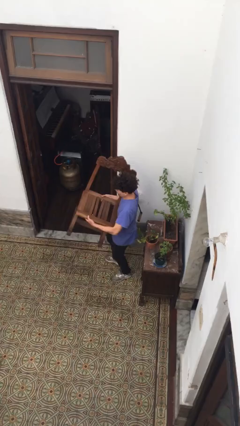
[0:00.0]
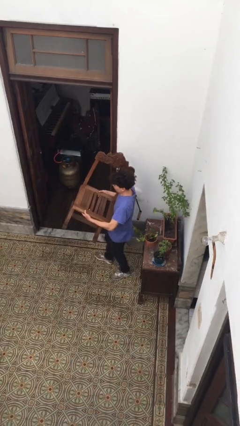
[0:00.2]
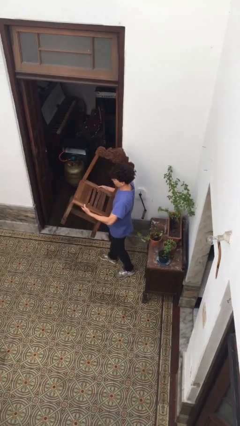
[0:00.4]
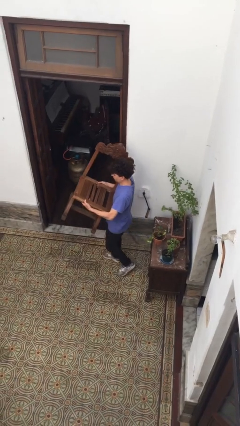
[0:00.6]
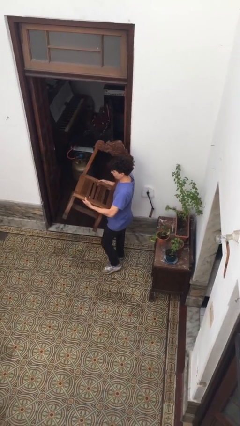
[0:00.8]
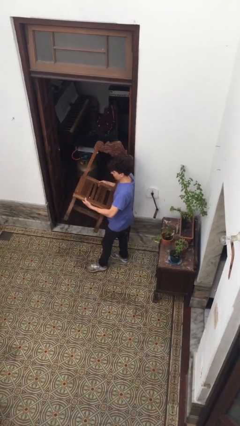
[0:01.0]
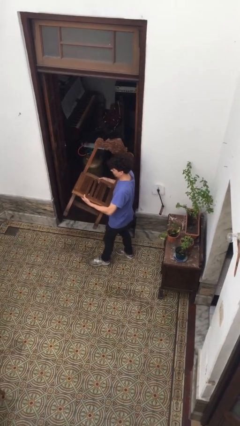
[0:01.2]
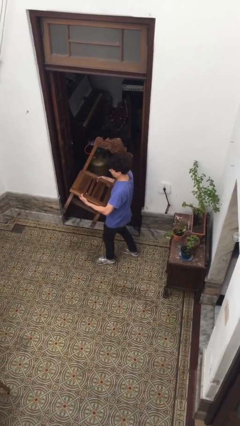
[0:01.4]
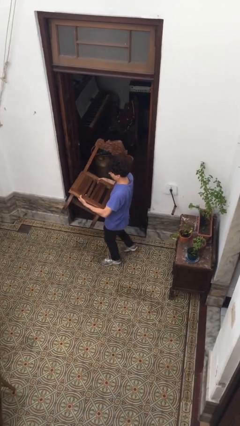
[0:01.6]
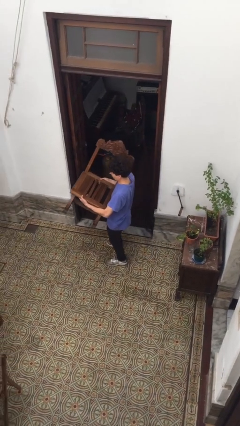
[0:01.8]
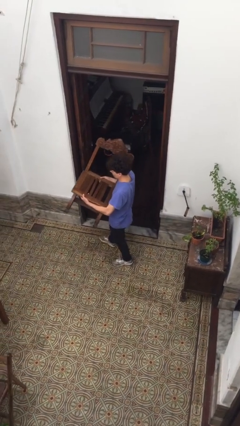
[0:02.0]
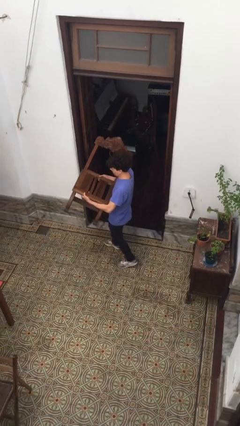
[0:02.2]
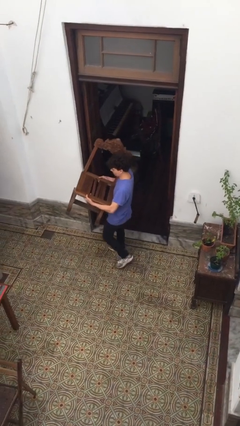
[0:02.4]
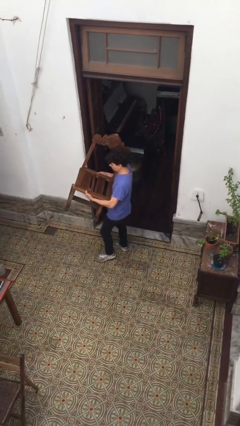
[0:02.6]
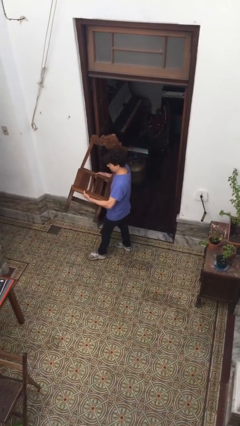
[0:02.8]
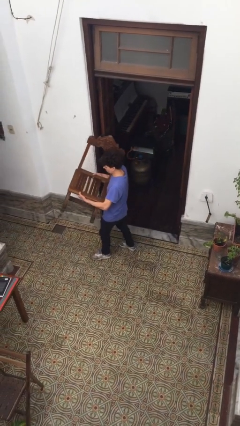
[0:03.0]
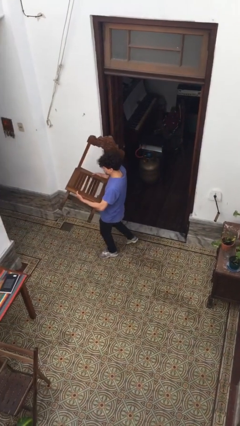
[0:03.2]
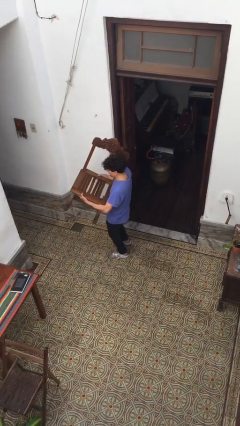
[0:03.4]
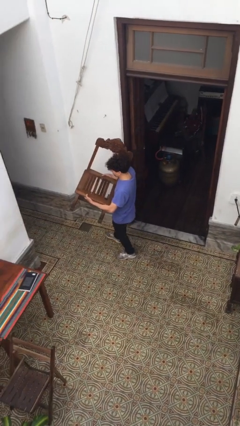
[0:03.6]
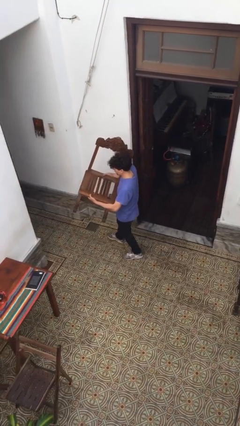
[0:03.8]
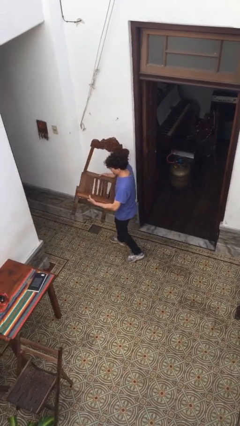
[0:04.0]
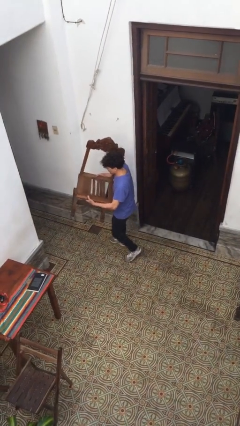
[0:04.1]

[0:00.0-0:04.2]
person carries heavy object

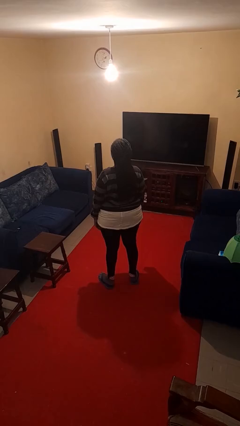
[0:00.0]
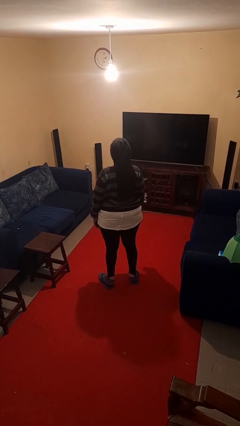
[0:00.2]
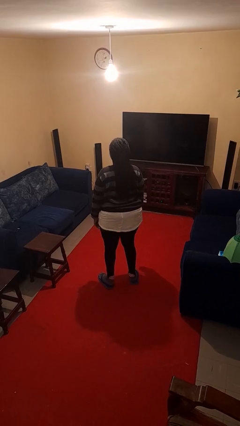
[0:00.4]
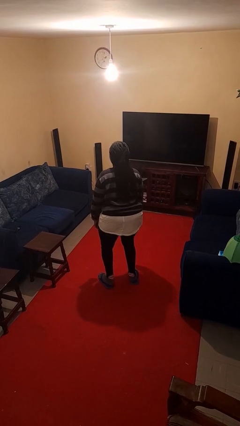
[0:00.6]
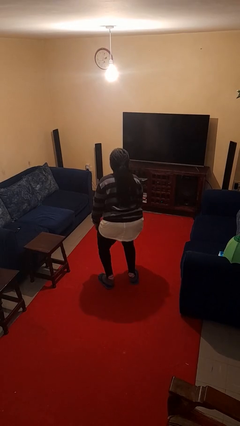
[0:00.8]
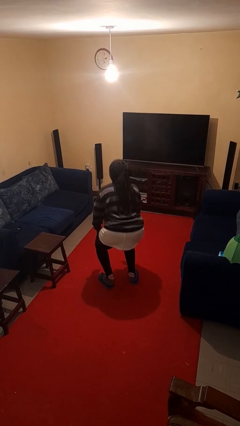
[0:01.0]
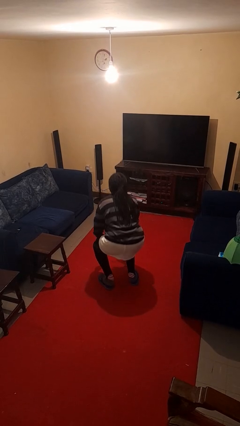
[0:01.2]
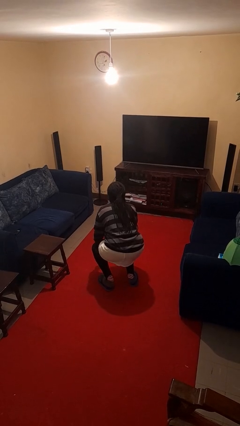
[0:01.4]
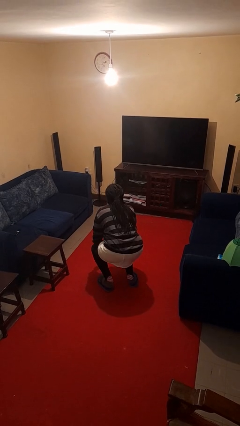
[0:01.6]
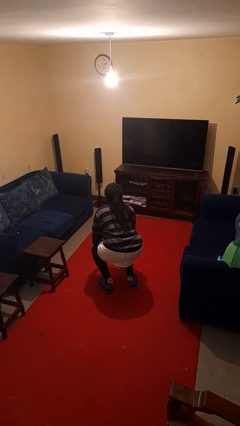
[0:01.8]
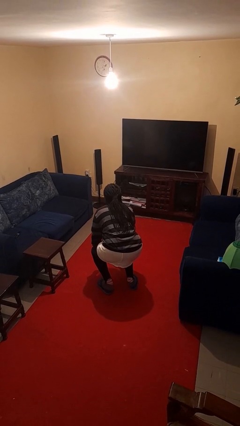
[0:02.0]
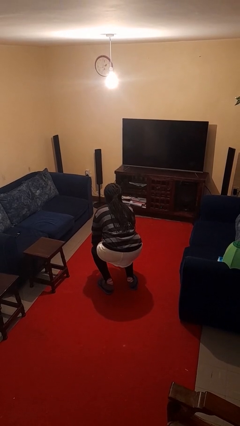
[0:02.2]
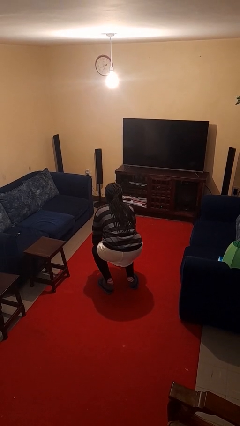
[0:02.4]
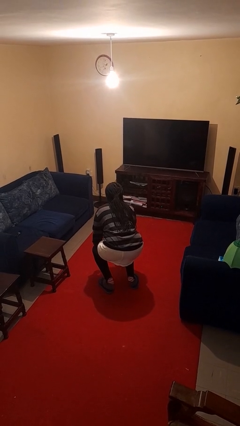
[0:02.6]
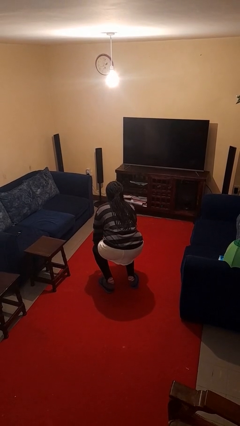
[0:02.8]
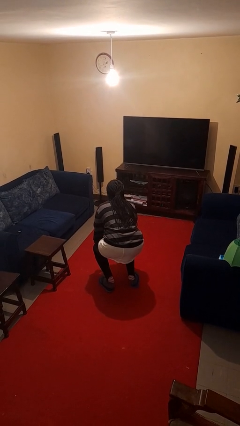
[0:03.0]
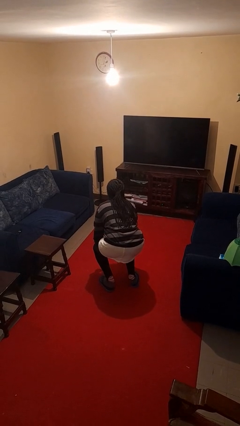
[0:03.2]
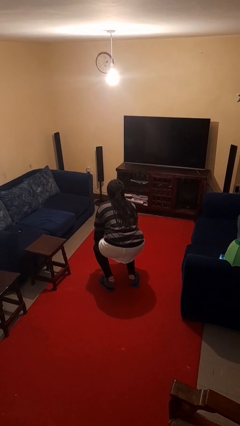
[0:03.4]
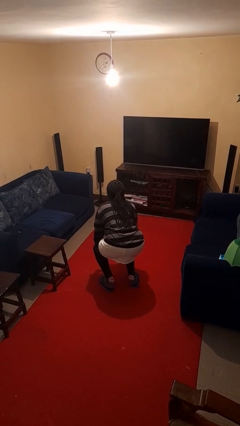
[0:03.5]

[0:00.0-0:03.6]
person squats

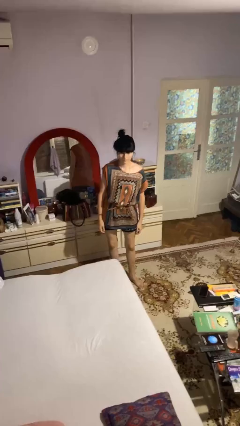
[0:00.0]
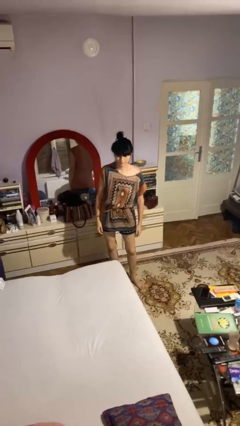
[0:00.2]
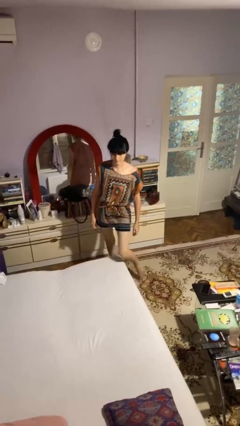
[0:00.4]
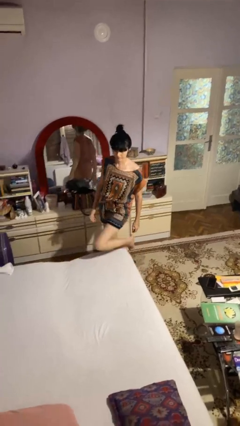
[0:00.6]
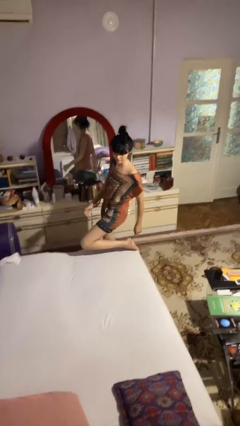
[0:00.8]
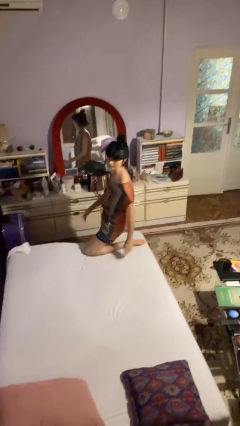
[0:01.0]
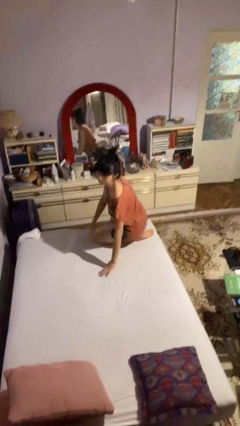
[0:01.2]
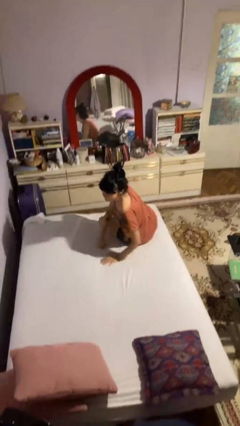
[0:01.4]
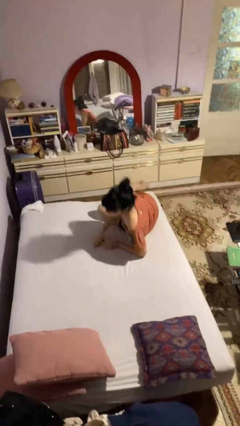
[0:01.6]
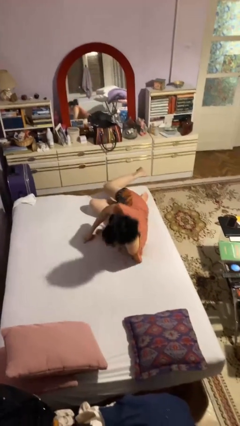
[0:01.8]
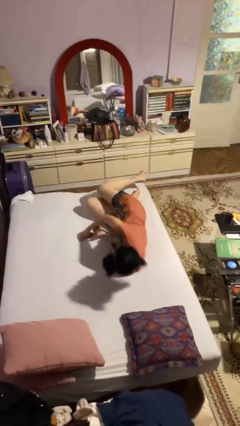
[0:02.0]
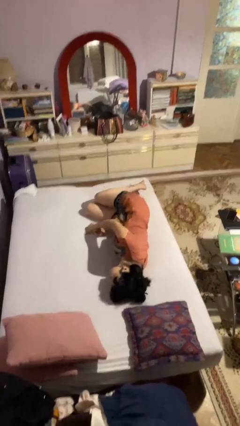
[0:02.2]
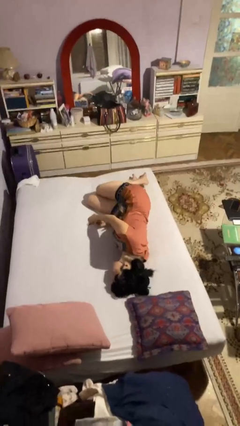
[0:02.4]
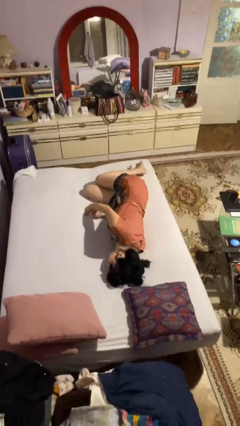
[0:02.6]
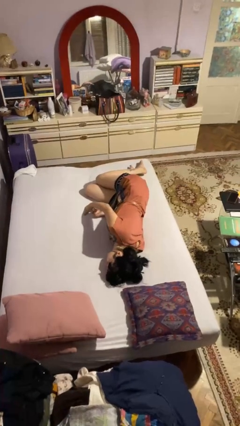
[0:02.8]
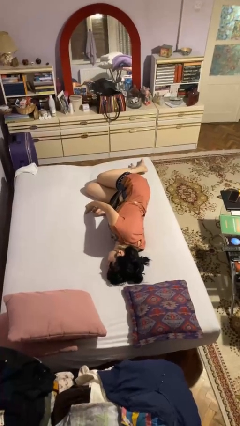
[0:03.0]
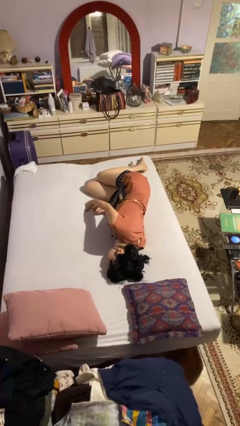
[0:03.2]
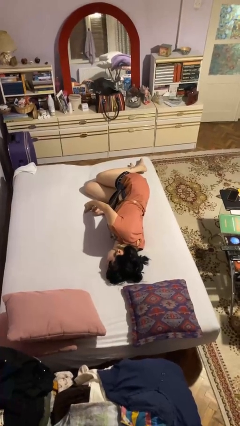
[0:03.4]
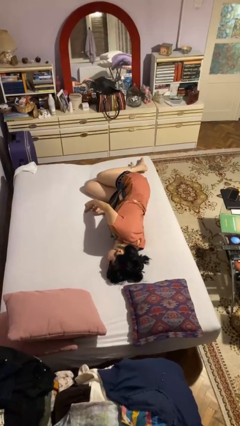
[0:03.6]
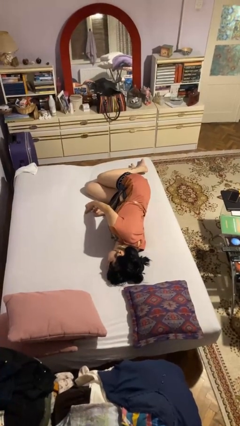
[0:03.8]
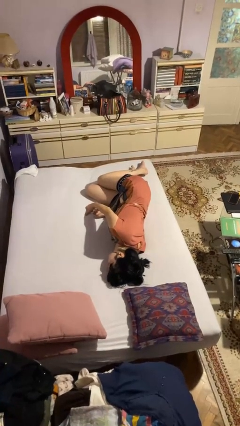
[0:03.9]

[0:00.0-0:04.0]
person lies down on bed

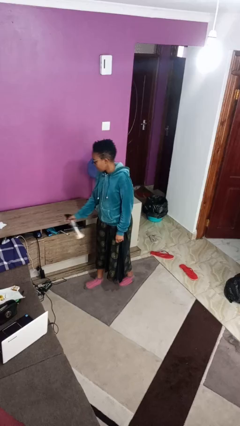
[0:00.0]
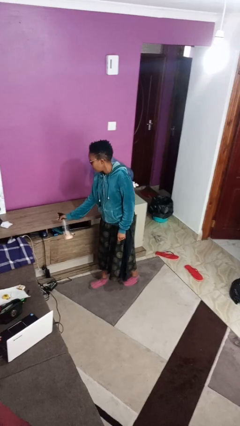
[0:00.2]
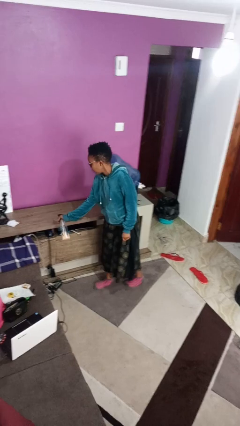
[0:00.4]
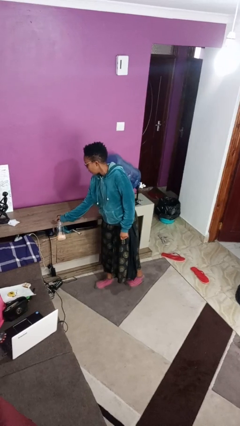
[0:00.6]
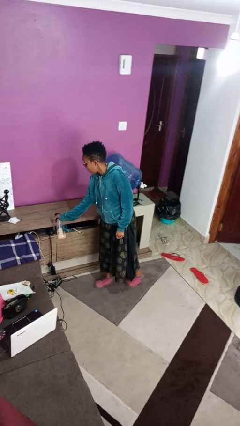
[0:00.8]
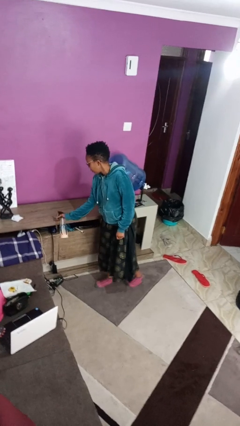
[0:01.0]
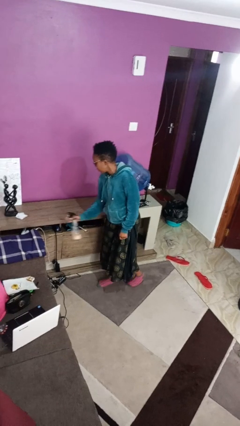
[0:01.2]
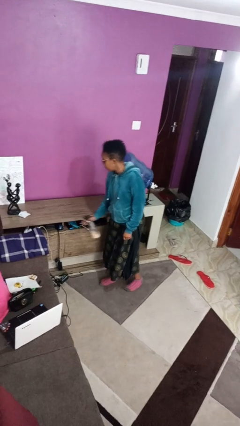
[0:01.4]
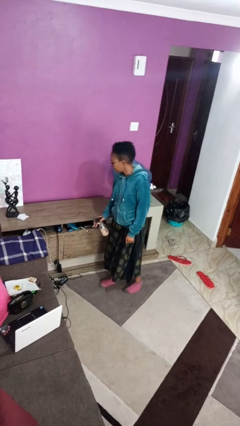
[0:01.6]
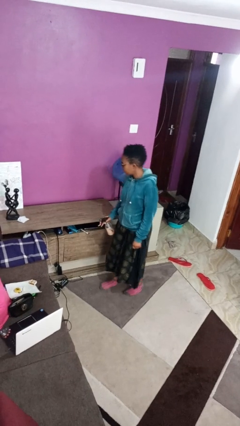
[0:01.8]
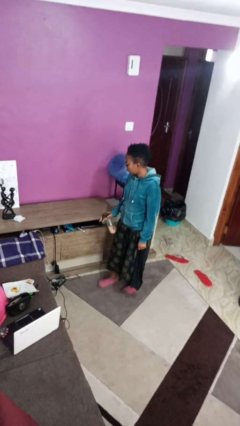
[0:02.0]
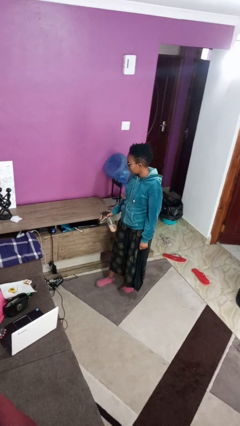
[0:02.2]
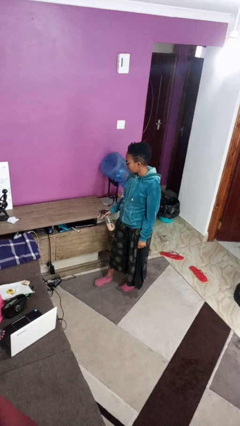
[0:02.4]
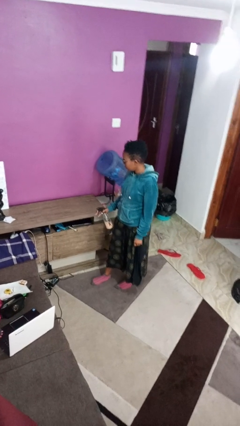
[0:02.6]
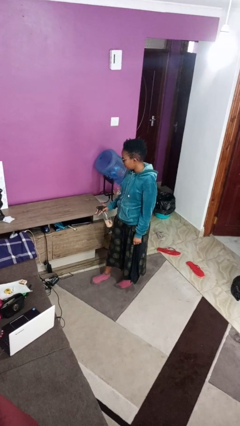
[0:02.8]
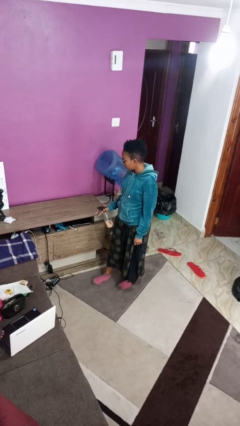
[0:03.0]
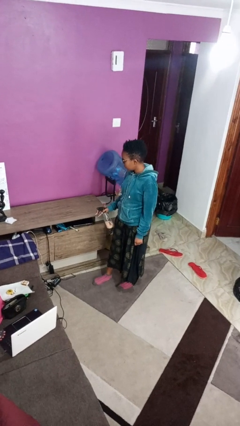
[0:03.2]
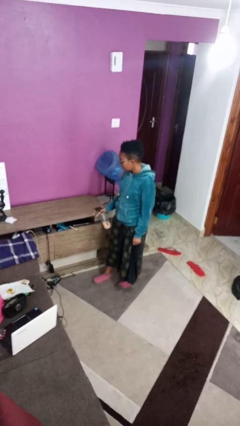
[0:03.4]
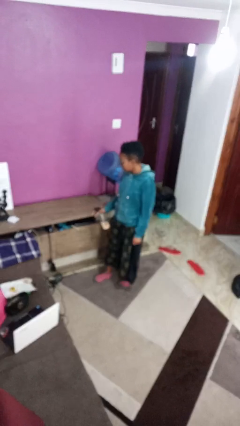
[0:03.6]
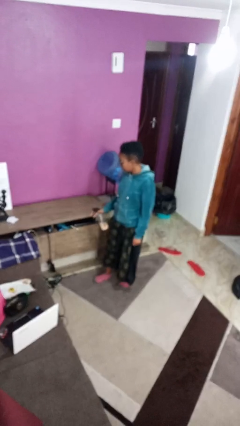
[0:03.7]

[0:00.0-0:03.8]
person sprays from bottle

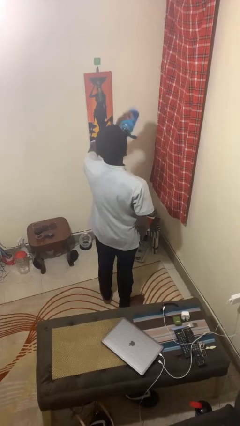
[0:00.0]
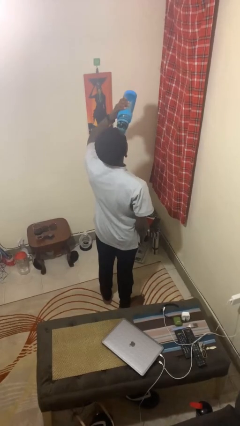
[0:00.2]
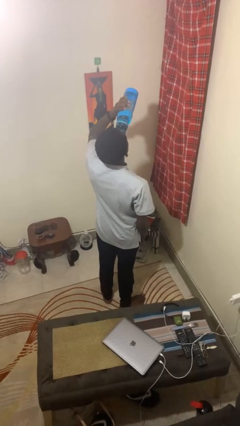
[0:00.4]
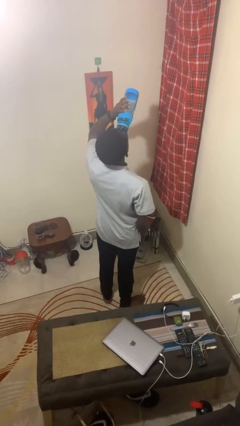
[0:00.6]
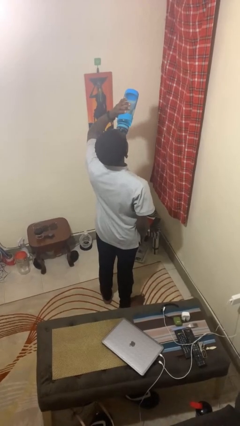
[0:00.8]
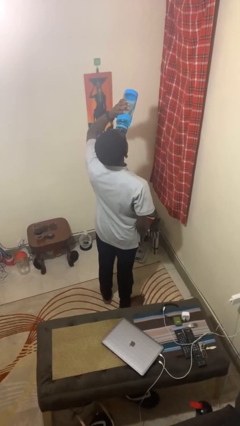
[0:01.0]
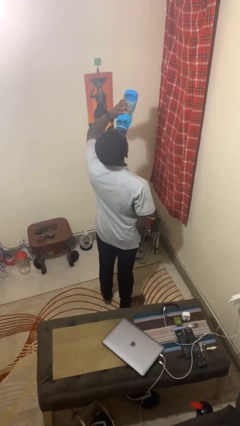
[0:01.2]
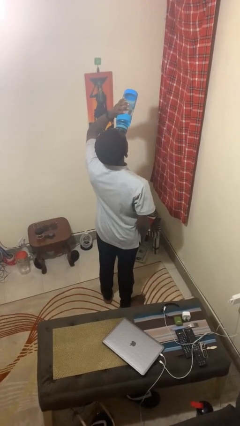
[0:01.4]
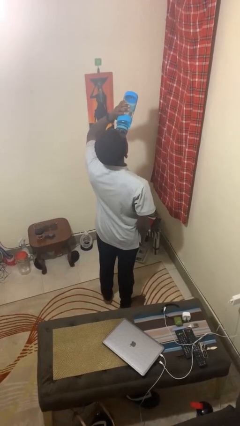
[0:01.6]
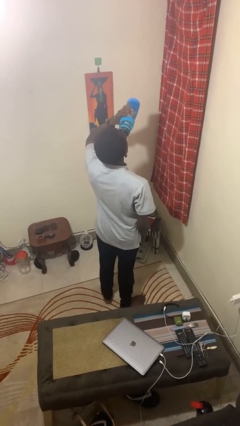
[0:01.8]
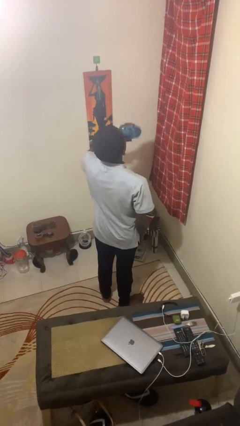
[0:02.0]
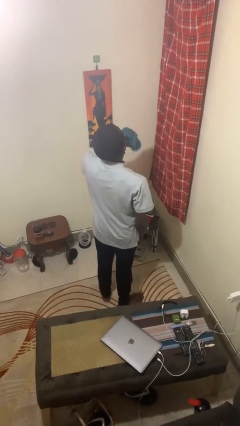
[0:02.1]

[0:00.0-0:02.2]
person drinks from bottle
